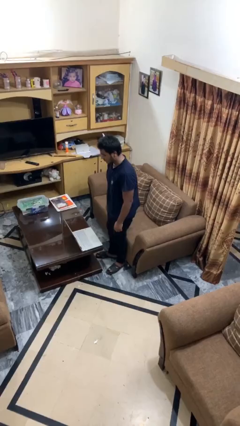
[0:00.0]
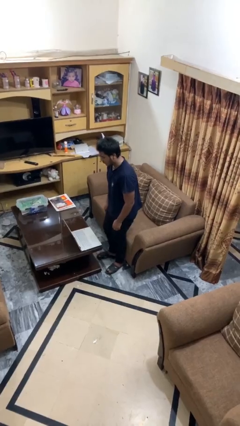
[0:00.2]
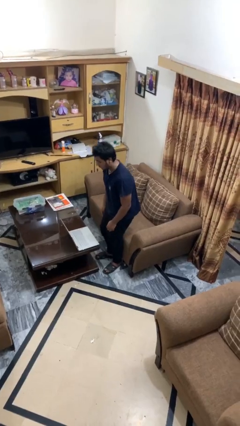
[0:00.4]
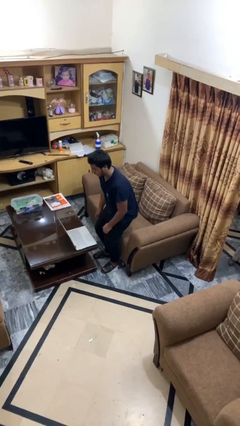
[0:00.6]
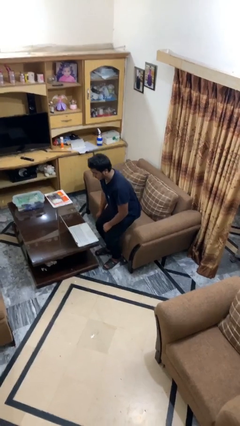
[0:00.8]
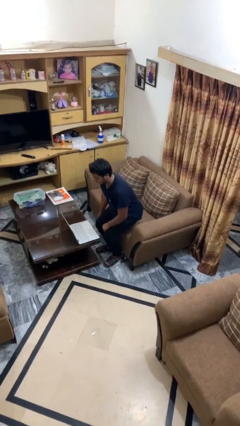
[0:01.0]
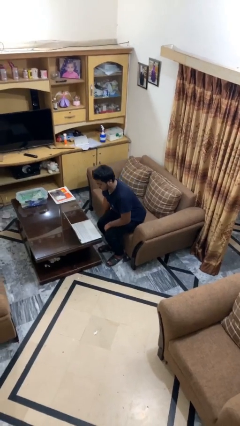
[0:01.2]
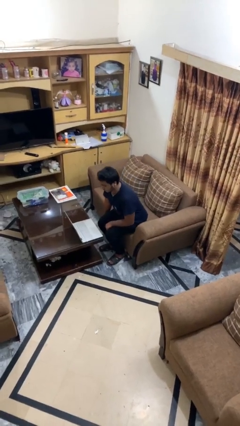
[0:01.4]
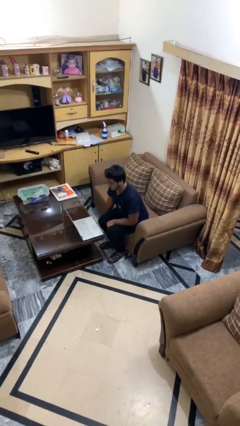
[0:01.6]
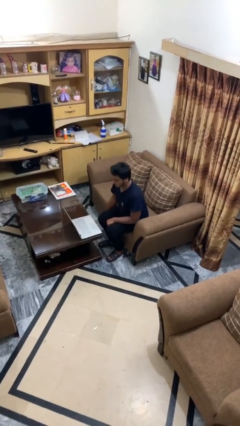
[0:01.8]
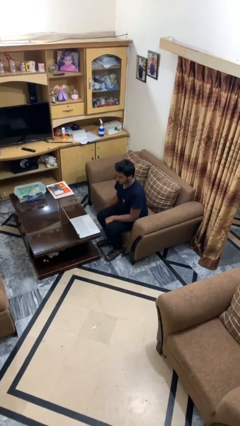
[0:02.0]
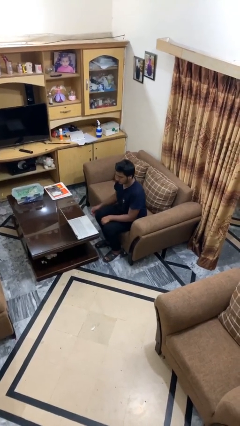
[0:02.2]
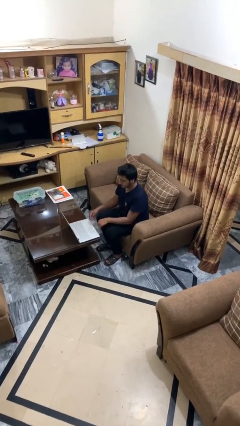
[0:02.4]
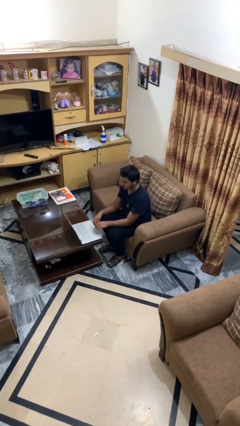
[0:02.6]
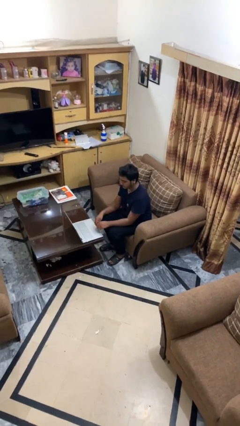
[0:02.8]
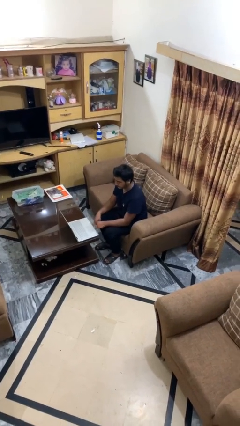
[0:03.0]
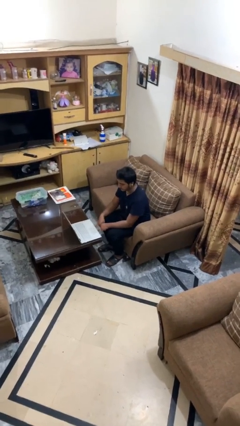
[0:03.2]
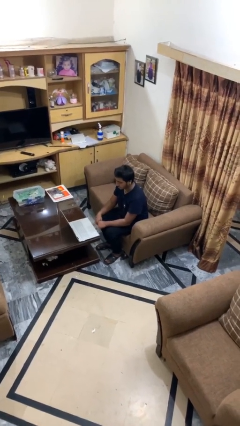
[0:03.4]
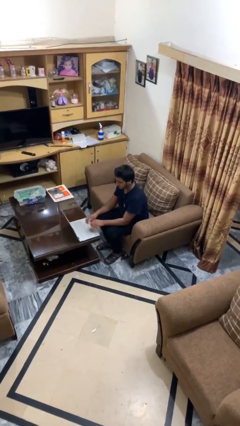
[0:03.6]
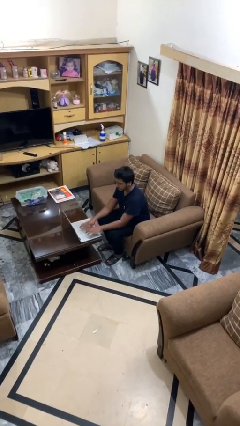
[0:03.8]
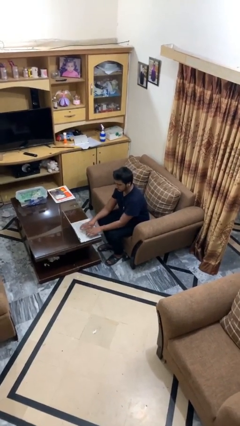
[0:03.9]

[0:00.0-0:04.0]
person sits down

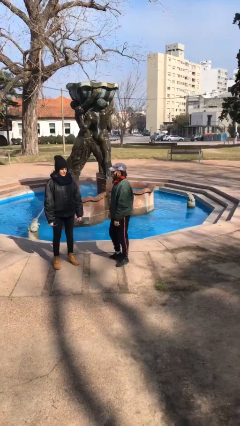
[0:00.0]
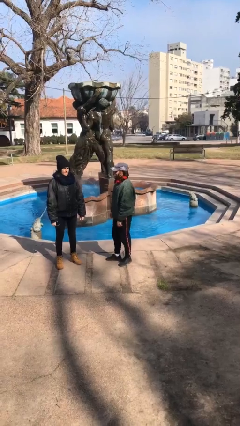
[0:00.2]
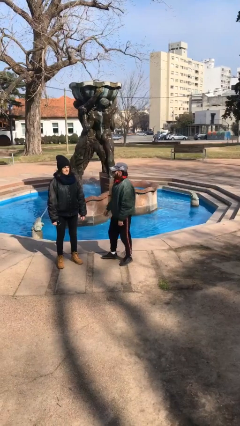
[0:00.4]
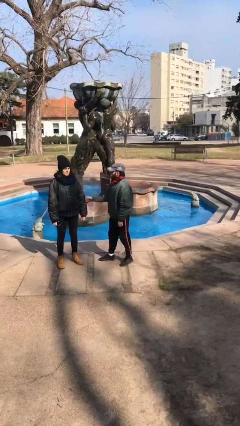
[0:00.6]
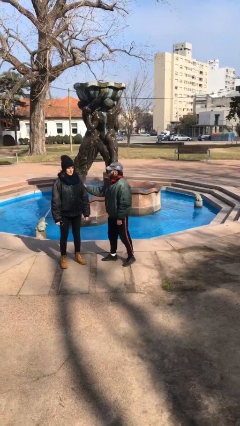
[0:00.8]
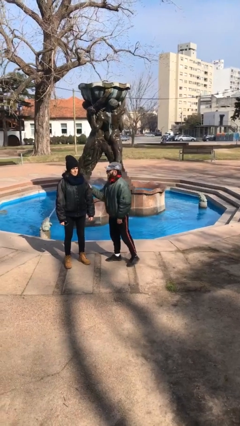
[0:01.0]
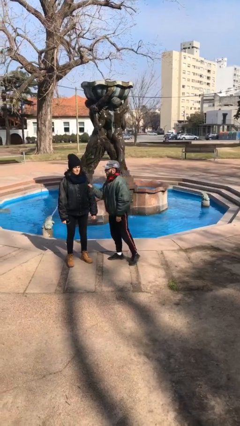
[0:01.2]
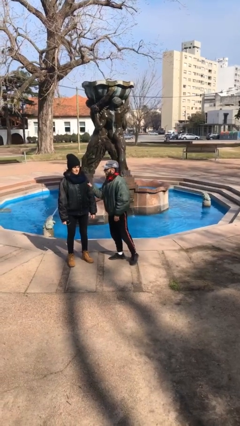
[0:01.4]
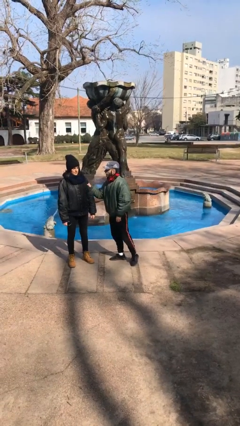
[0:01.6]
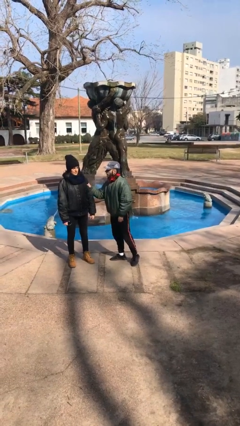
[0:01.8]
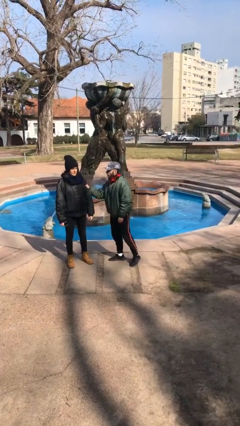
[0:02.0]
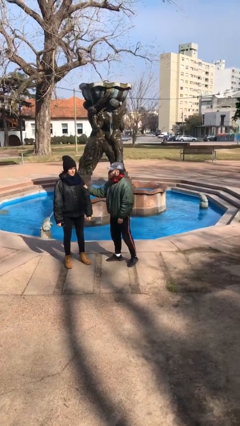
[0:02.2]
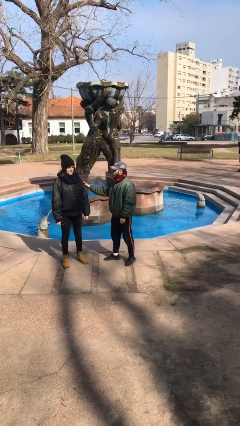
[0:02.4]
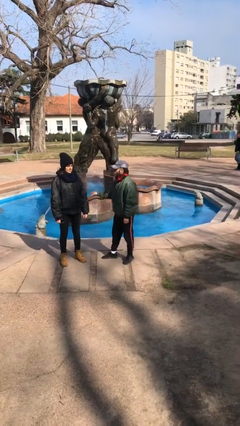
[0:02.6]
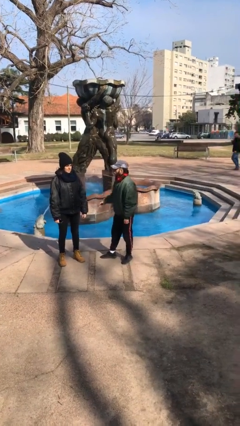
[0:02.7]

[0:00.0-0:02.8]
person grabs person by bicep

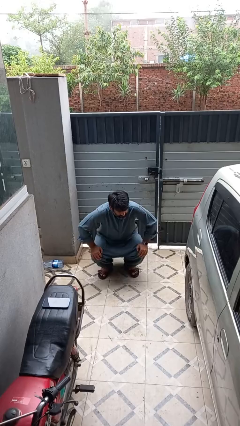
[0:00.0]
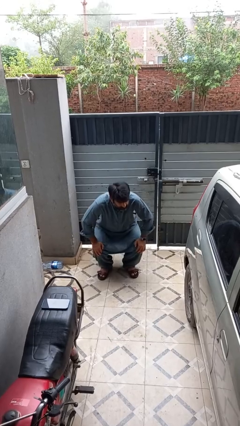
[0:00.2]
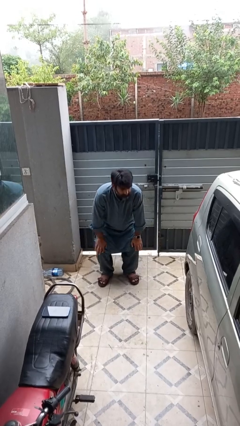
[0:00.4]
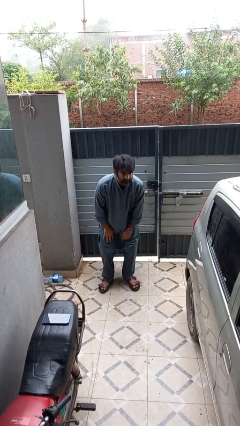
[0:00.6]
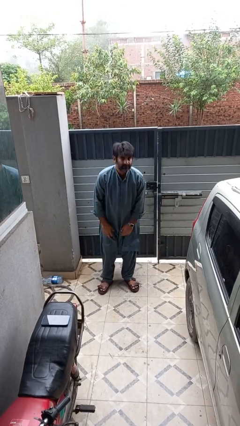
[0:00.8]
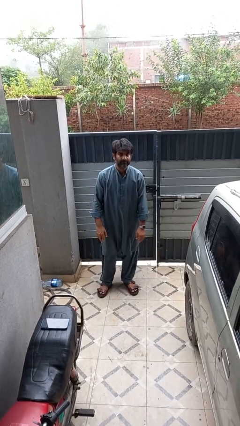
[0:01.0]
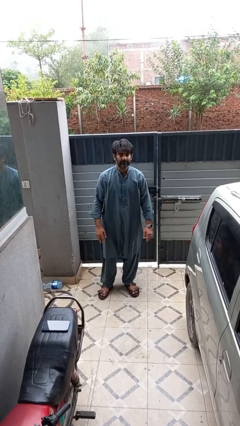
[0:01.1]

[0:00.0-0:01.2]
person stands up

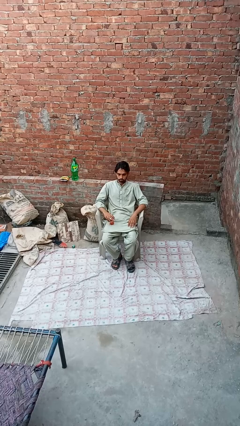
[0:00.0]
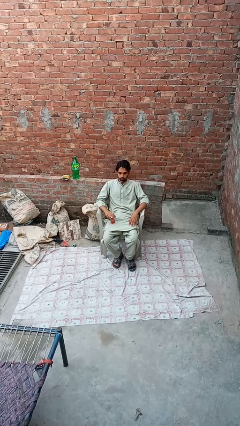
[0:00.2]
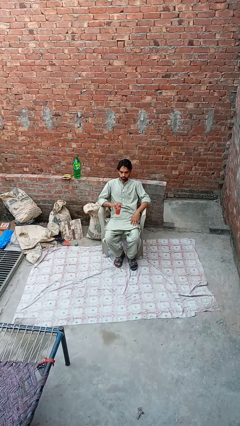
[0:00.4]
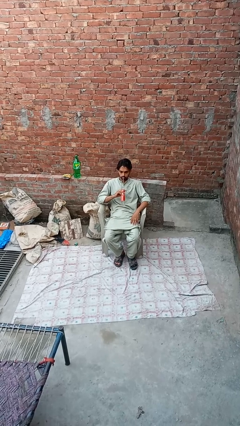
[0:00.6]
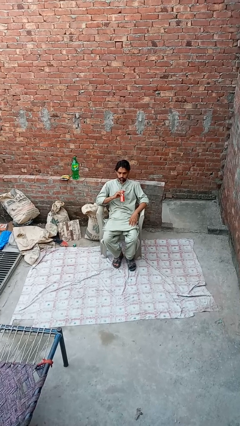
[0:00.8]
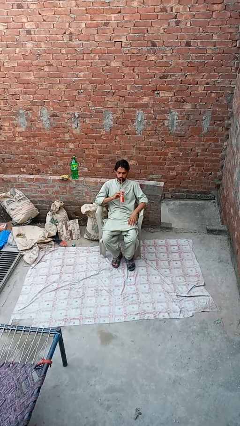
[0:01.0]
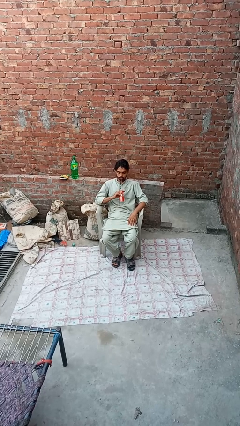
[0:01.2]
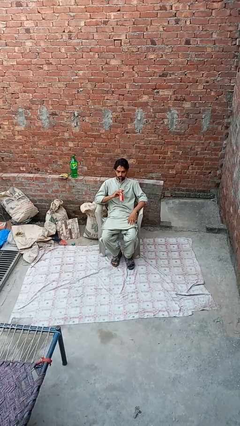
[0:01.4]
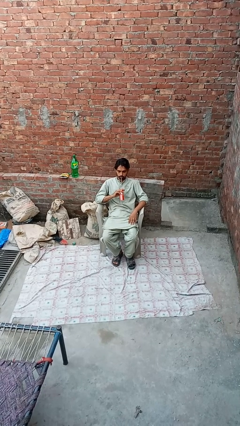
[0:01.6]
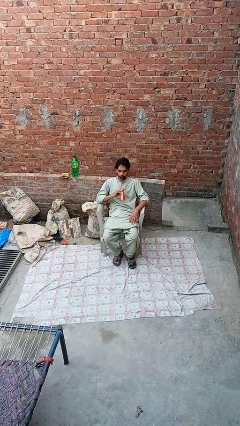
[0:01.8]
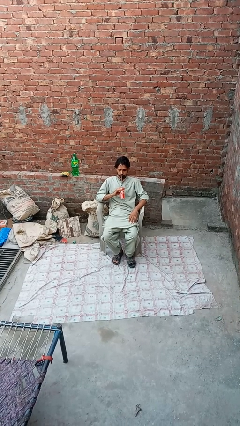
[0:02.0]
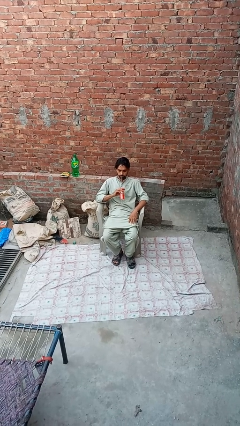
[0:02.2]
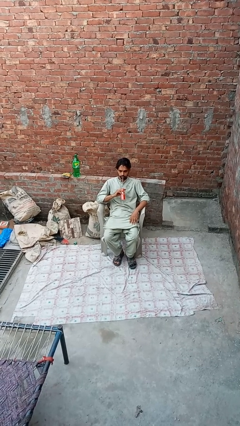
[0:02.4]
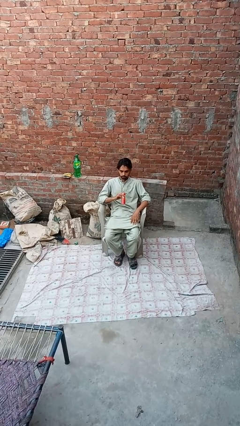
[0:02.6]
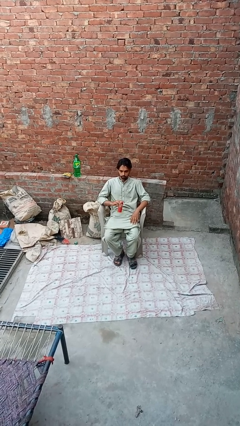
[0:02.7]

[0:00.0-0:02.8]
person drinks from straw

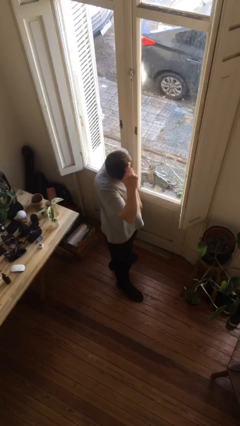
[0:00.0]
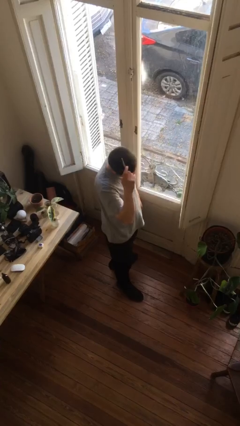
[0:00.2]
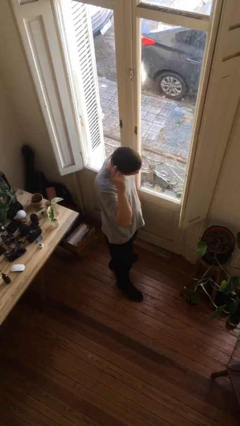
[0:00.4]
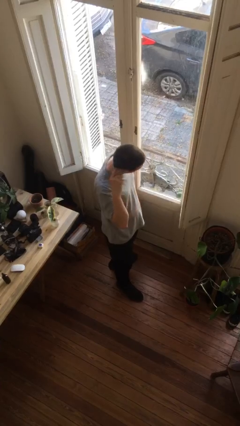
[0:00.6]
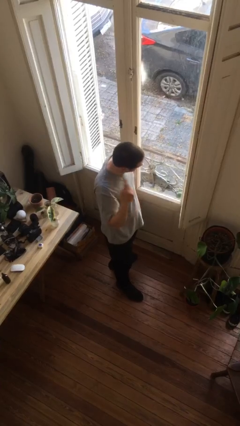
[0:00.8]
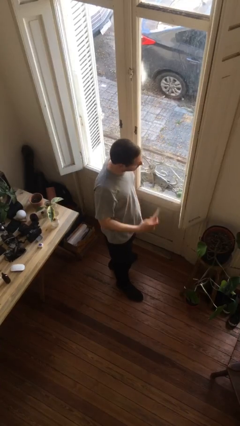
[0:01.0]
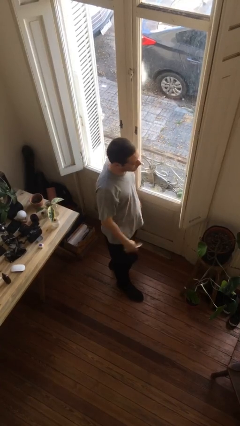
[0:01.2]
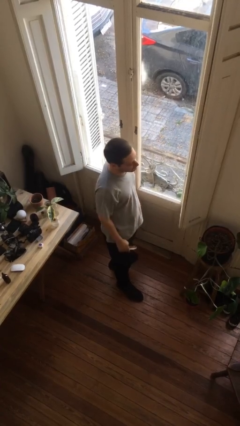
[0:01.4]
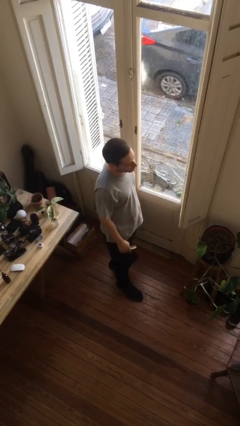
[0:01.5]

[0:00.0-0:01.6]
person brushes hair

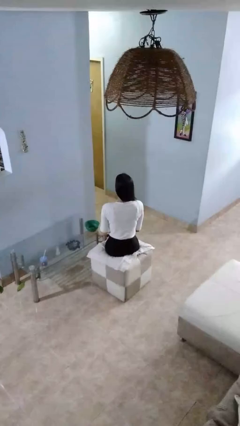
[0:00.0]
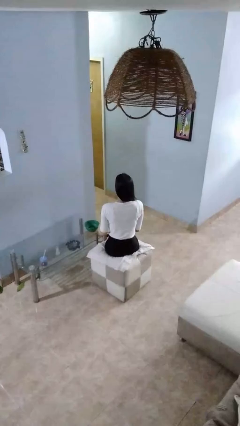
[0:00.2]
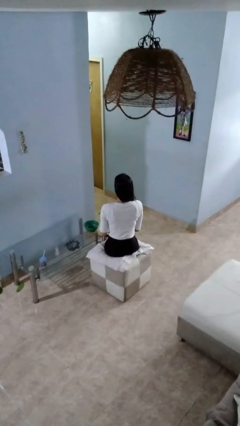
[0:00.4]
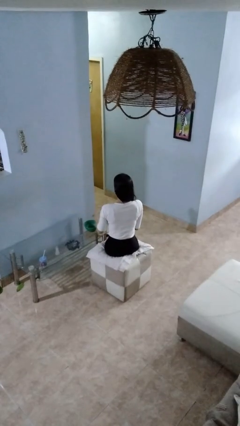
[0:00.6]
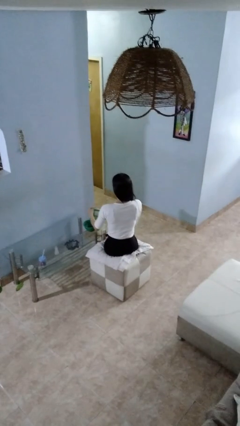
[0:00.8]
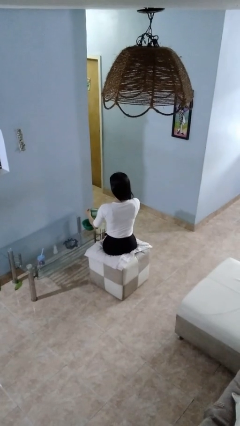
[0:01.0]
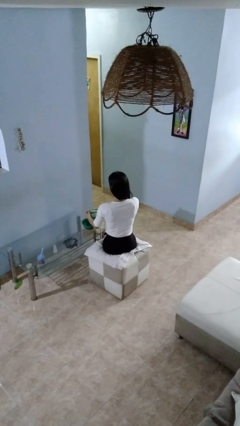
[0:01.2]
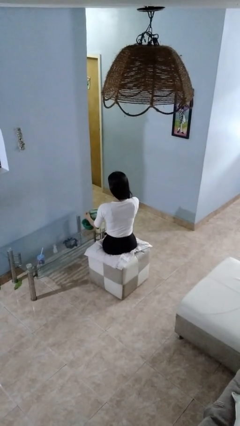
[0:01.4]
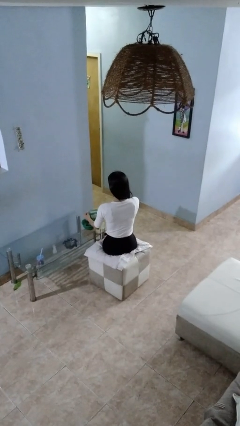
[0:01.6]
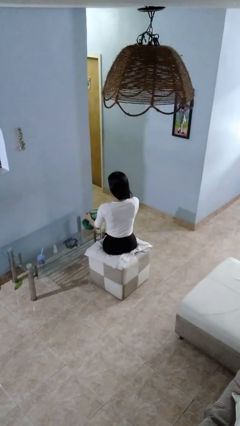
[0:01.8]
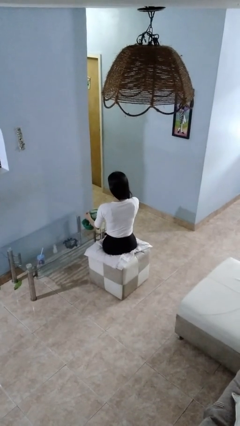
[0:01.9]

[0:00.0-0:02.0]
person pours into bowl

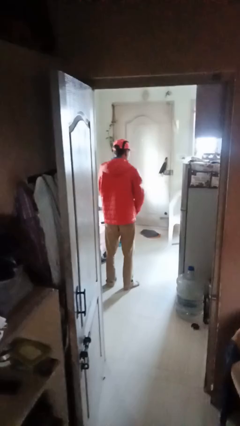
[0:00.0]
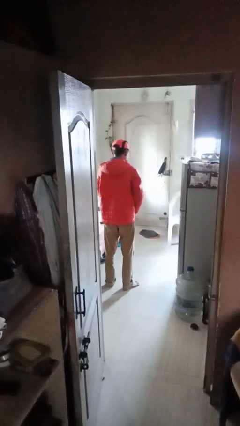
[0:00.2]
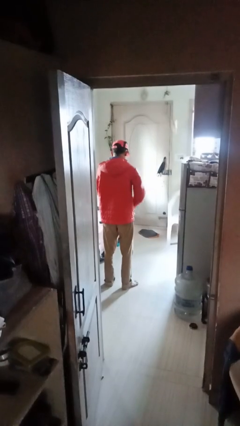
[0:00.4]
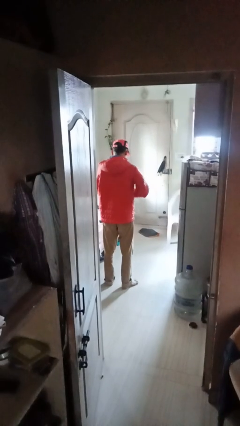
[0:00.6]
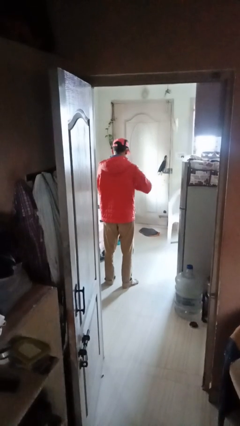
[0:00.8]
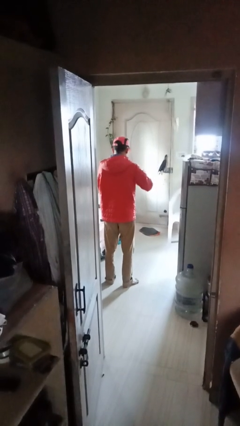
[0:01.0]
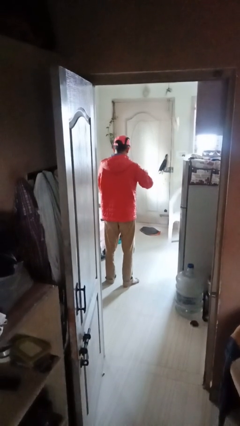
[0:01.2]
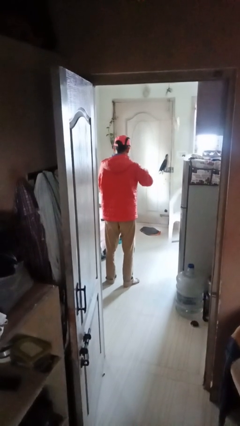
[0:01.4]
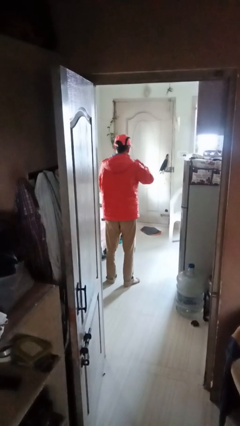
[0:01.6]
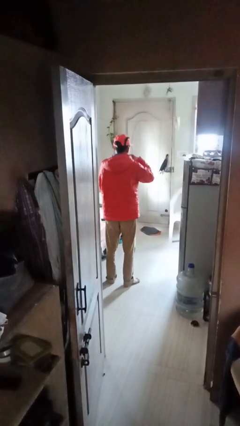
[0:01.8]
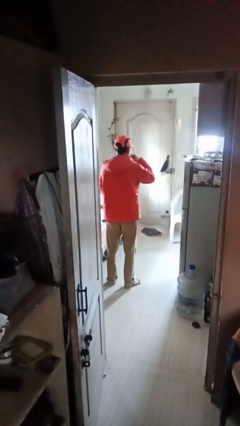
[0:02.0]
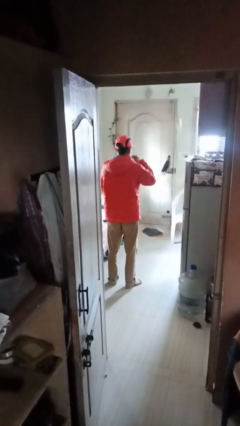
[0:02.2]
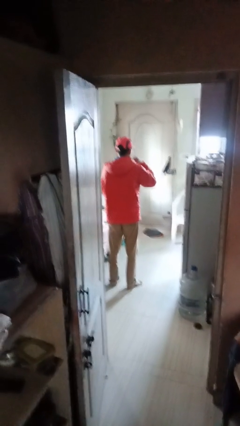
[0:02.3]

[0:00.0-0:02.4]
person zips up jacket

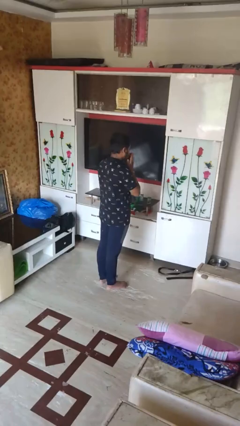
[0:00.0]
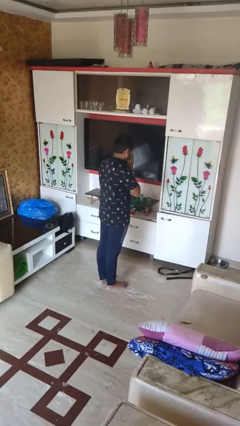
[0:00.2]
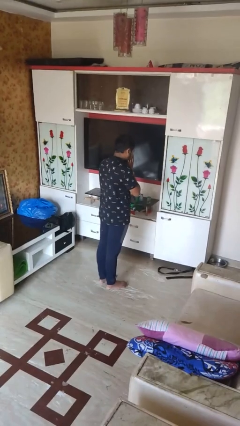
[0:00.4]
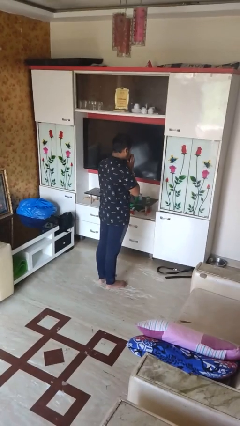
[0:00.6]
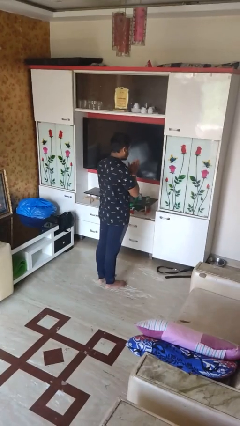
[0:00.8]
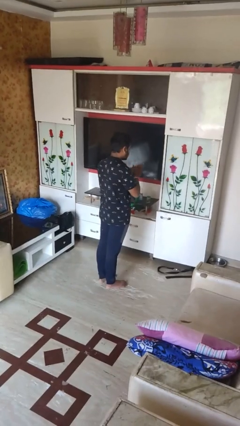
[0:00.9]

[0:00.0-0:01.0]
person sneezes into hand
